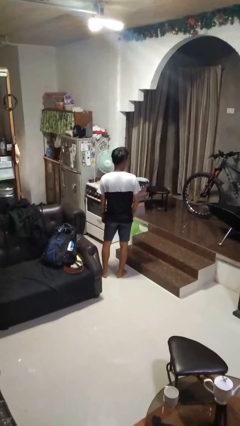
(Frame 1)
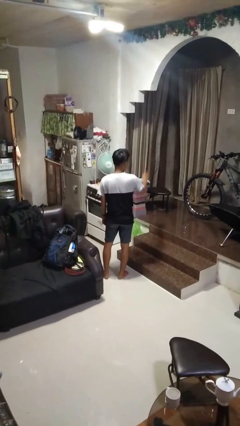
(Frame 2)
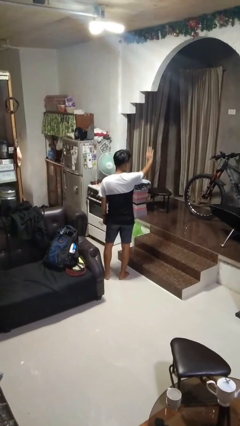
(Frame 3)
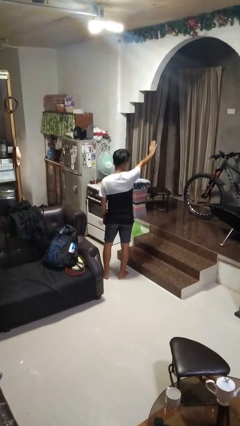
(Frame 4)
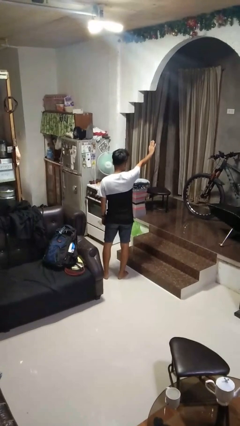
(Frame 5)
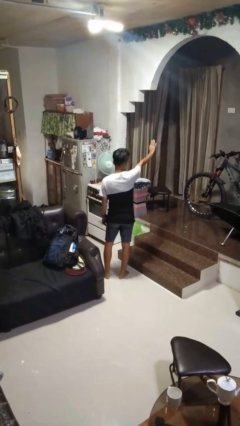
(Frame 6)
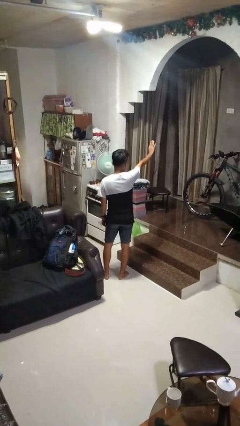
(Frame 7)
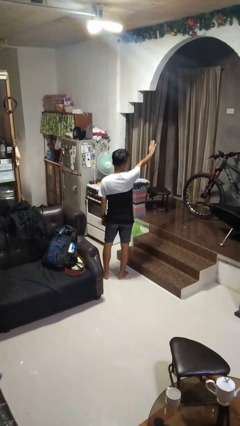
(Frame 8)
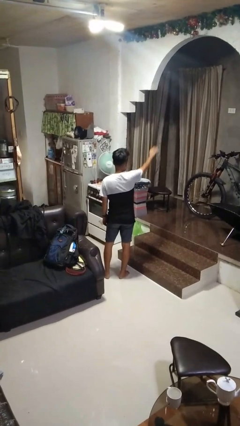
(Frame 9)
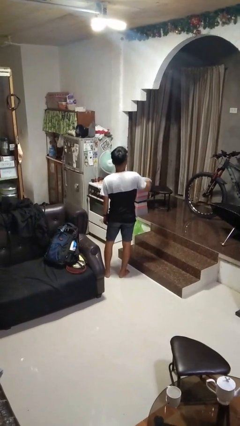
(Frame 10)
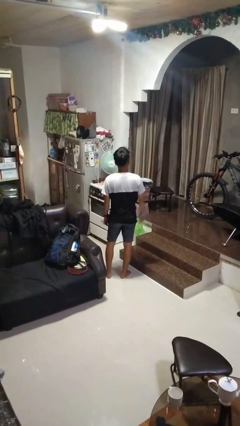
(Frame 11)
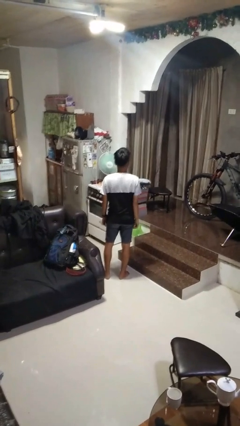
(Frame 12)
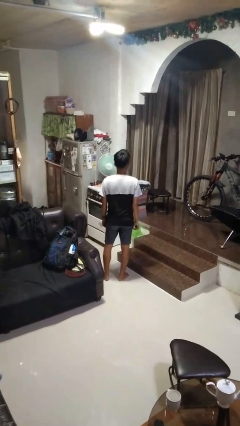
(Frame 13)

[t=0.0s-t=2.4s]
person gestures stop

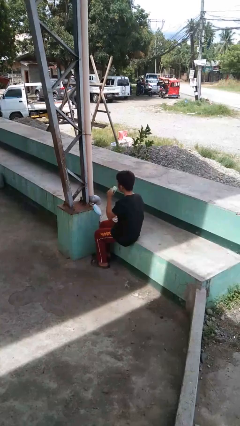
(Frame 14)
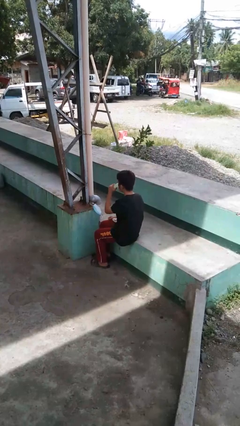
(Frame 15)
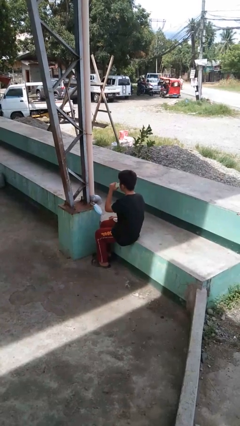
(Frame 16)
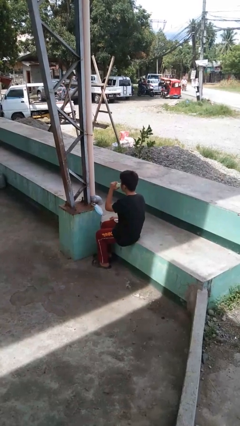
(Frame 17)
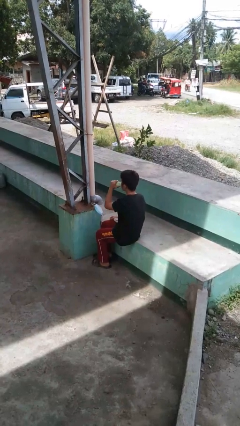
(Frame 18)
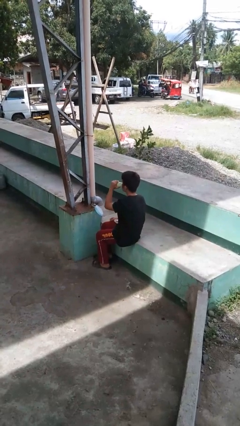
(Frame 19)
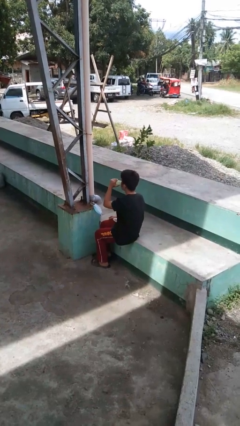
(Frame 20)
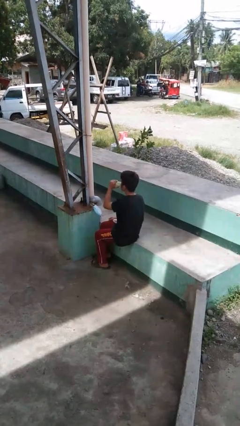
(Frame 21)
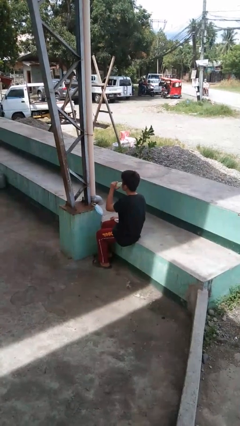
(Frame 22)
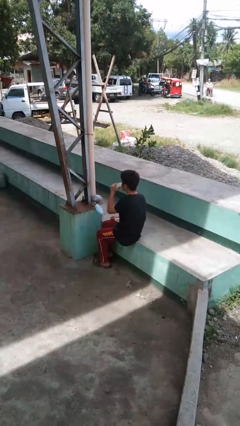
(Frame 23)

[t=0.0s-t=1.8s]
person drinks from bottle

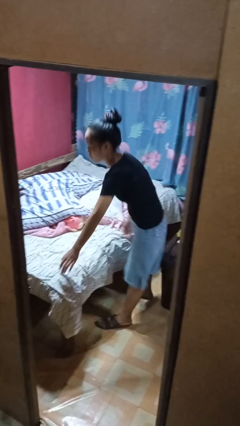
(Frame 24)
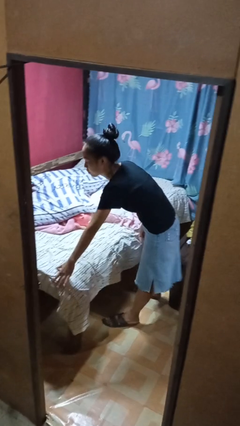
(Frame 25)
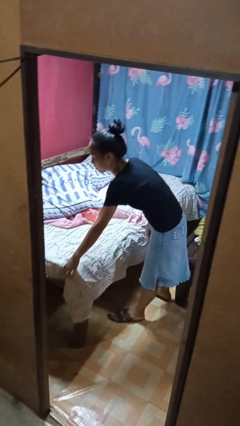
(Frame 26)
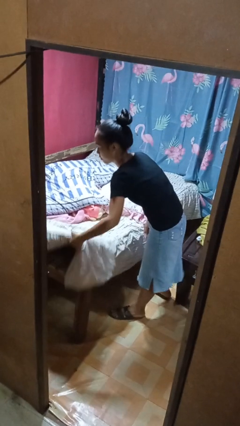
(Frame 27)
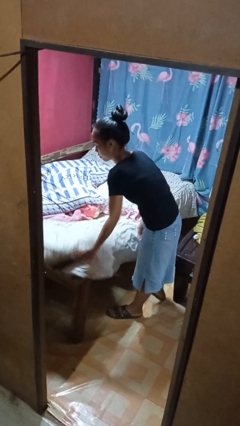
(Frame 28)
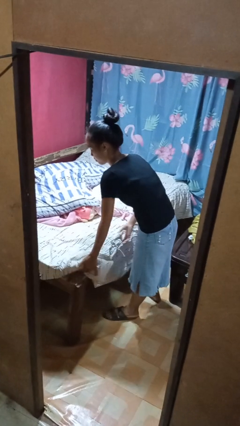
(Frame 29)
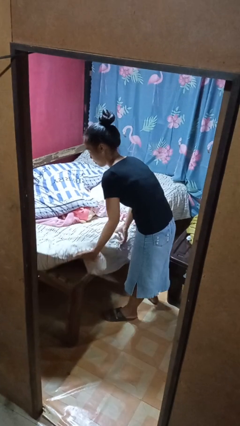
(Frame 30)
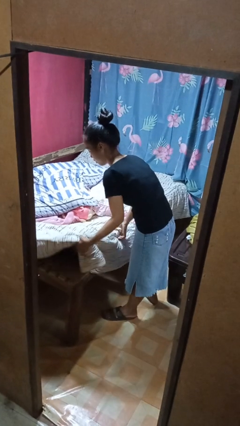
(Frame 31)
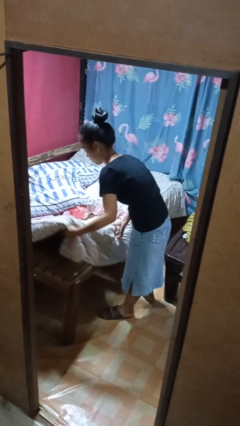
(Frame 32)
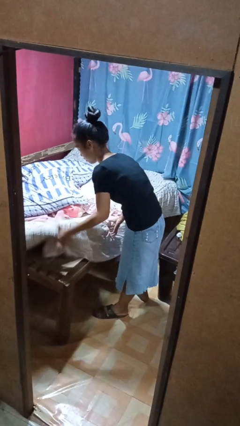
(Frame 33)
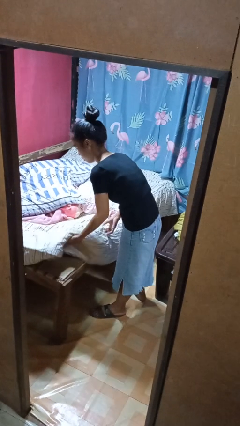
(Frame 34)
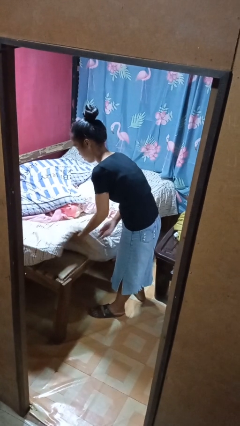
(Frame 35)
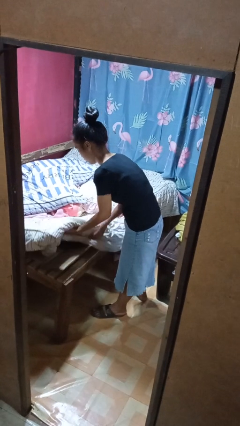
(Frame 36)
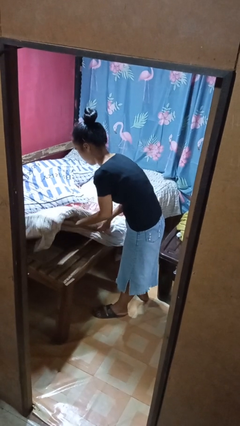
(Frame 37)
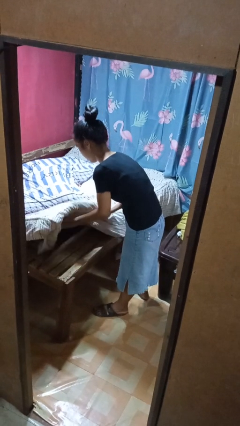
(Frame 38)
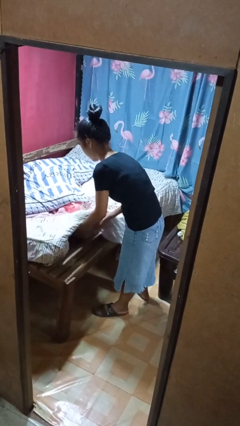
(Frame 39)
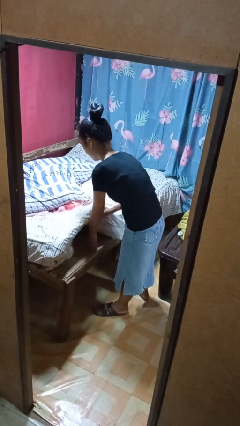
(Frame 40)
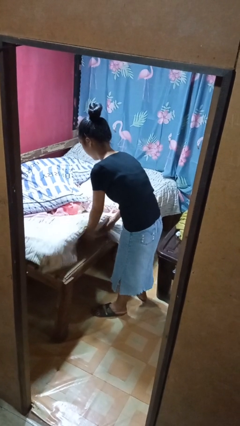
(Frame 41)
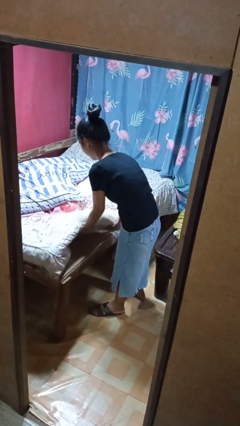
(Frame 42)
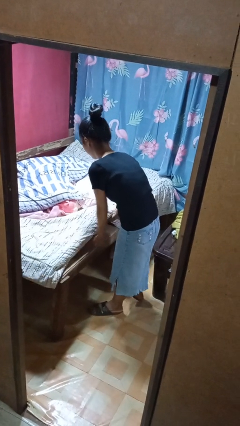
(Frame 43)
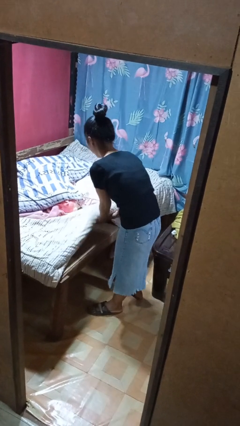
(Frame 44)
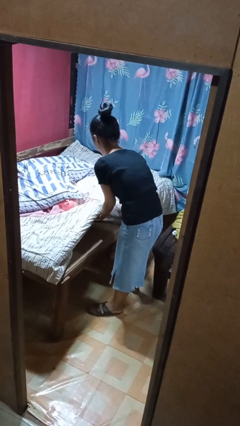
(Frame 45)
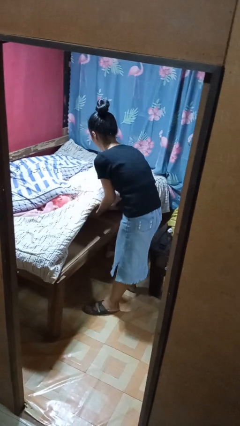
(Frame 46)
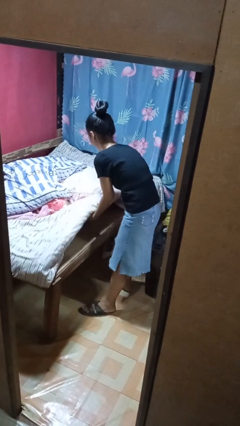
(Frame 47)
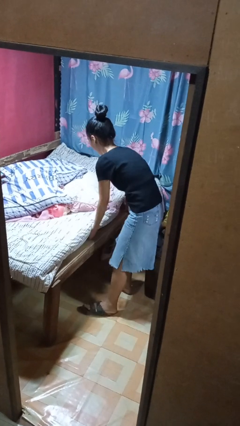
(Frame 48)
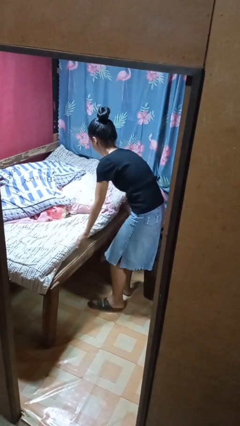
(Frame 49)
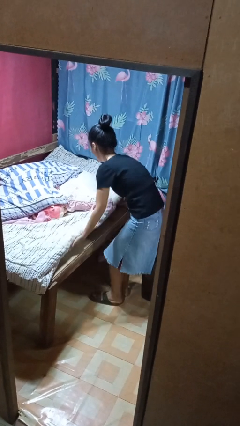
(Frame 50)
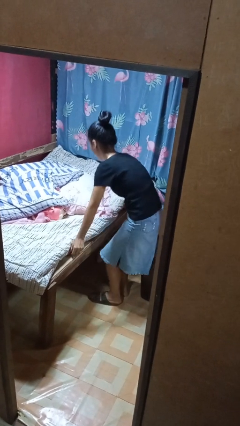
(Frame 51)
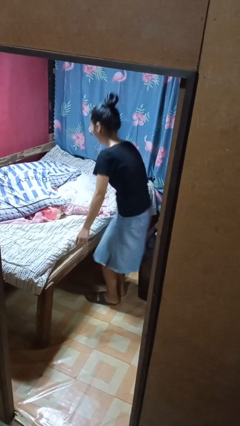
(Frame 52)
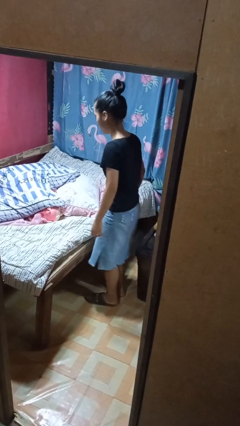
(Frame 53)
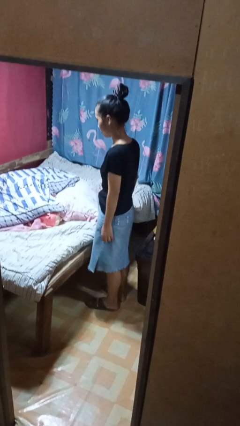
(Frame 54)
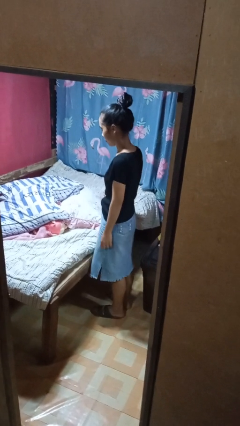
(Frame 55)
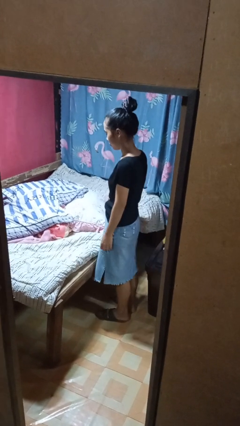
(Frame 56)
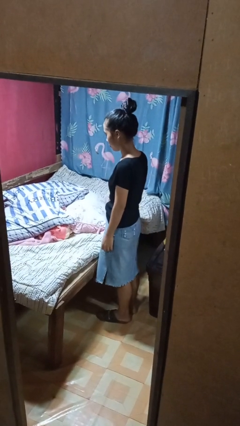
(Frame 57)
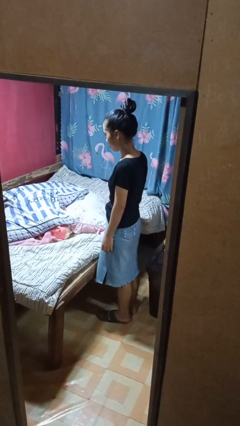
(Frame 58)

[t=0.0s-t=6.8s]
person makes bed

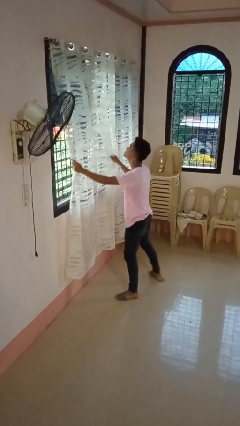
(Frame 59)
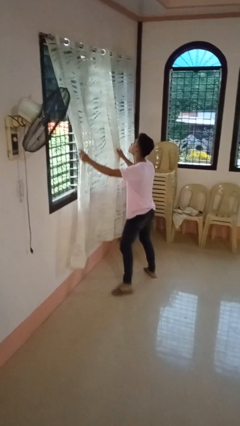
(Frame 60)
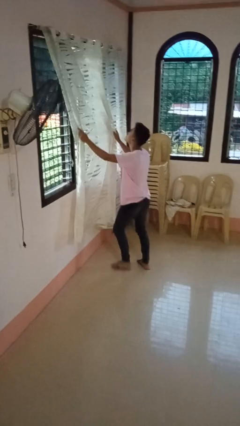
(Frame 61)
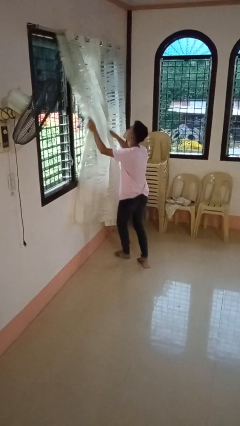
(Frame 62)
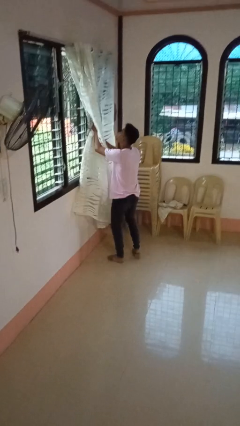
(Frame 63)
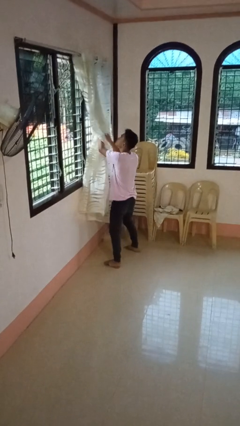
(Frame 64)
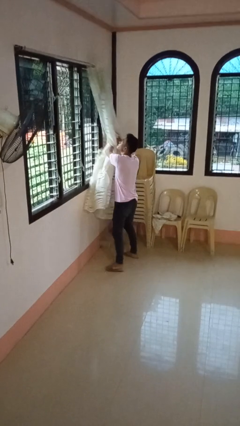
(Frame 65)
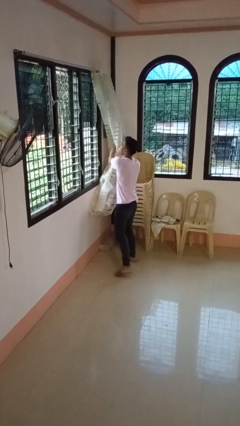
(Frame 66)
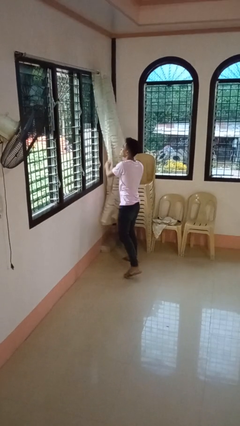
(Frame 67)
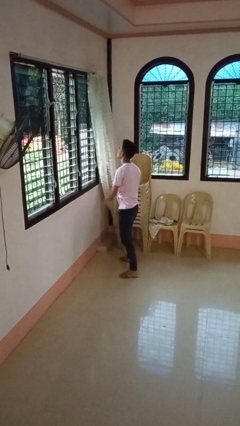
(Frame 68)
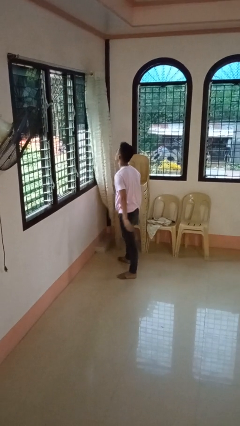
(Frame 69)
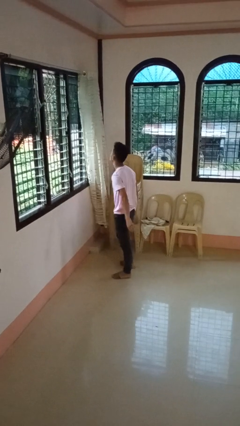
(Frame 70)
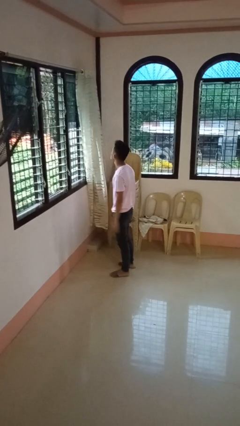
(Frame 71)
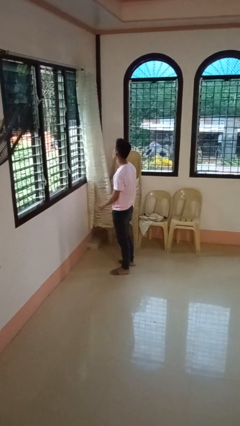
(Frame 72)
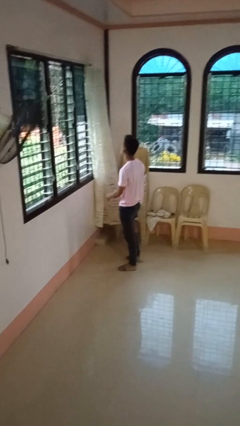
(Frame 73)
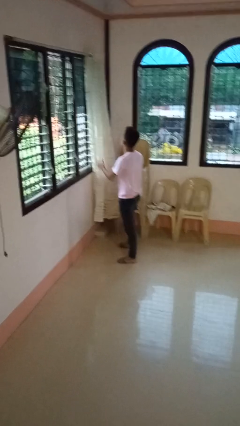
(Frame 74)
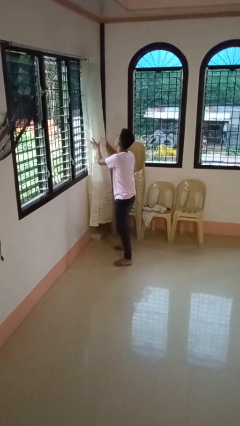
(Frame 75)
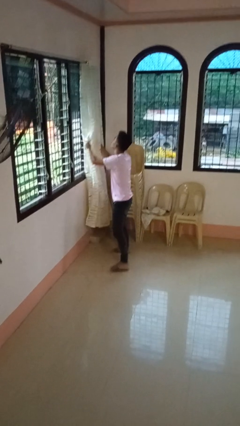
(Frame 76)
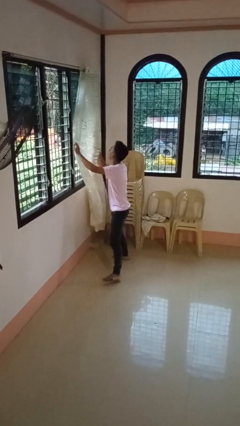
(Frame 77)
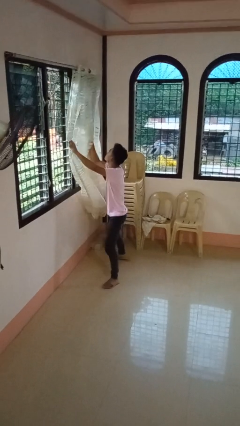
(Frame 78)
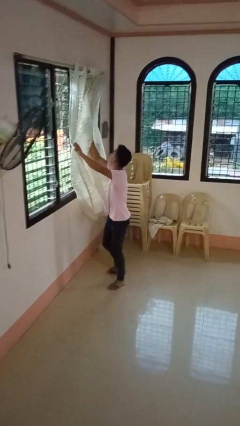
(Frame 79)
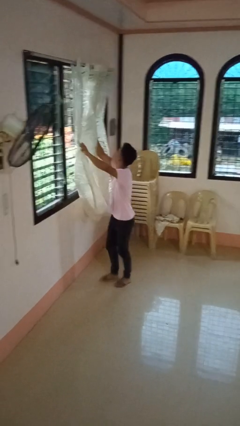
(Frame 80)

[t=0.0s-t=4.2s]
person opens curtains

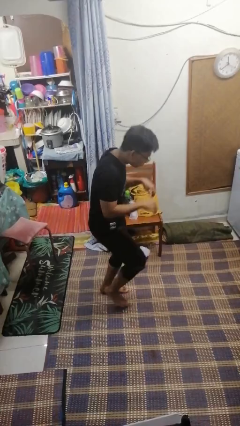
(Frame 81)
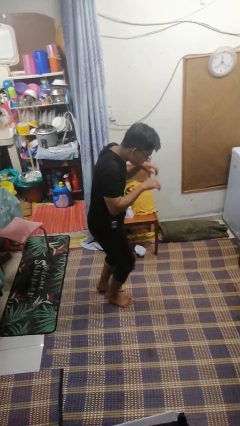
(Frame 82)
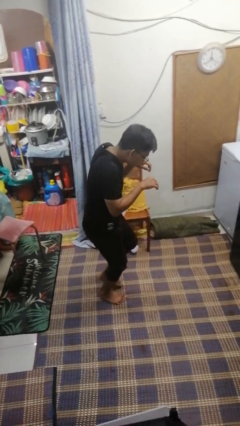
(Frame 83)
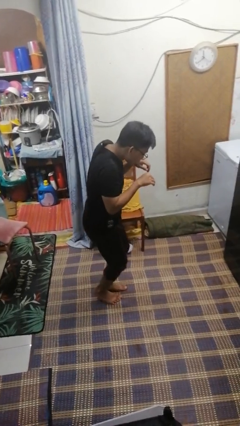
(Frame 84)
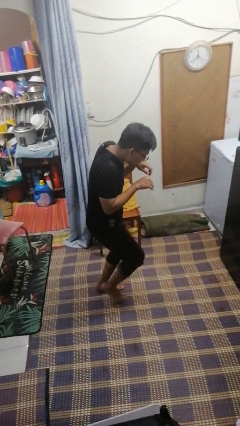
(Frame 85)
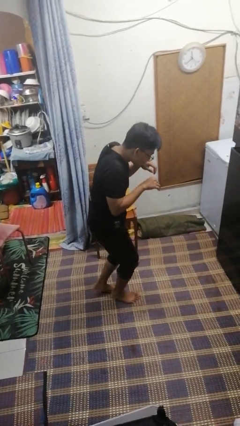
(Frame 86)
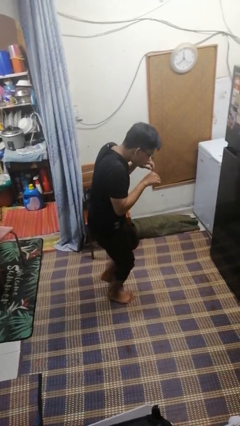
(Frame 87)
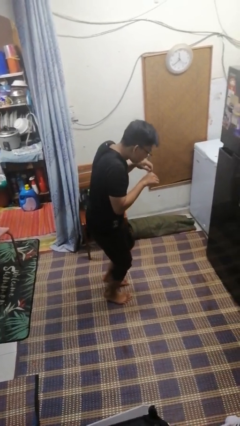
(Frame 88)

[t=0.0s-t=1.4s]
person walks tiptoe

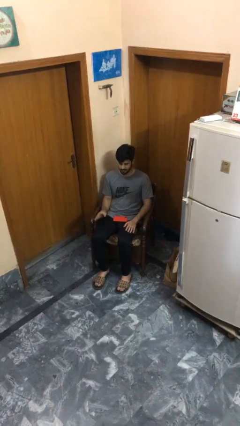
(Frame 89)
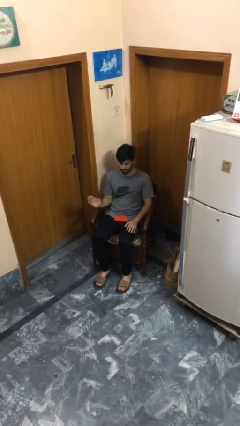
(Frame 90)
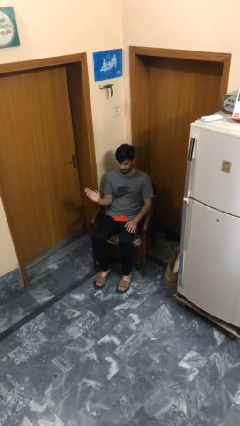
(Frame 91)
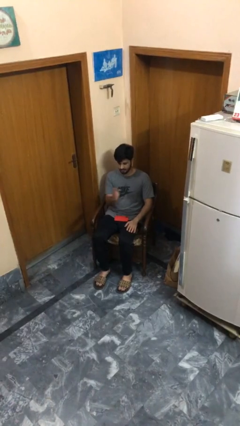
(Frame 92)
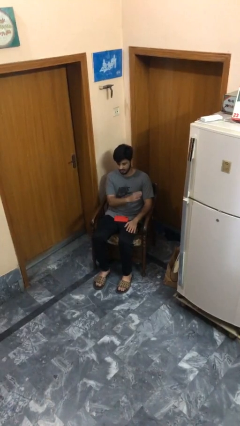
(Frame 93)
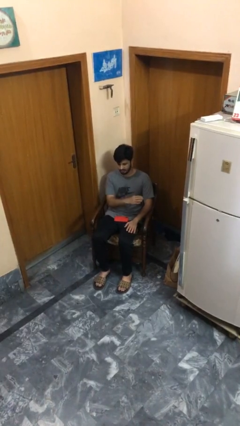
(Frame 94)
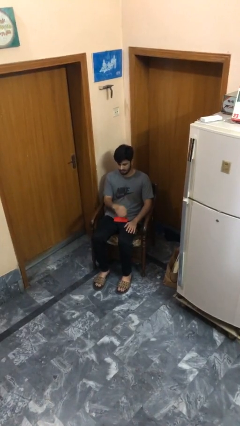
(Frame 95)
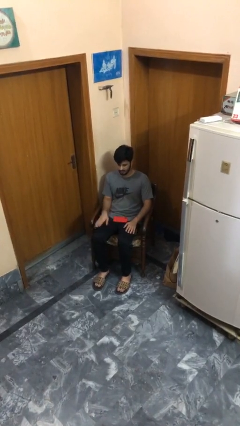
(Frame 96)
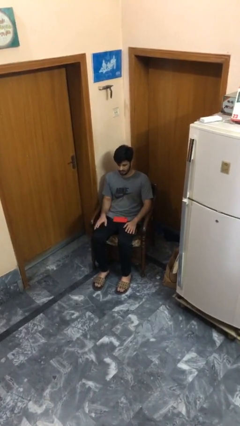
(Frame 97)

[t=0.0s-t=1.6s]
person gestures swipe left
